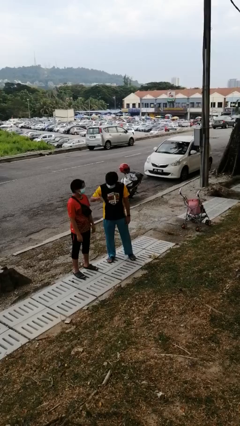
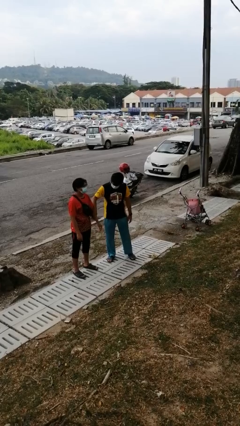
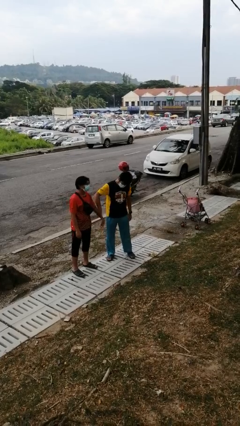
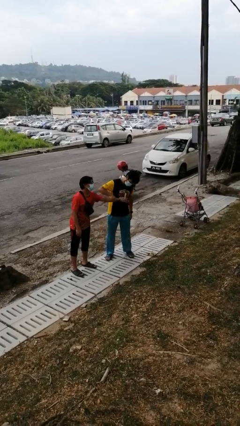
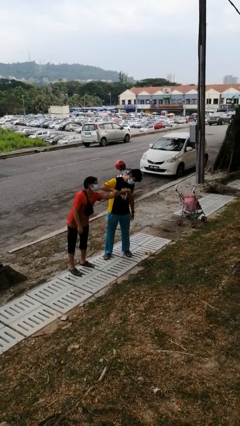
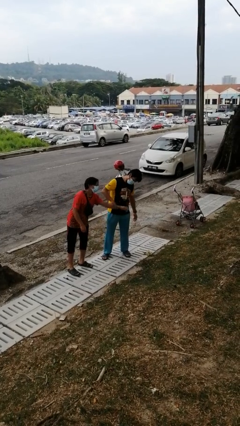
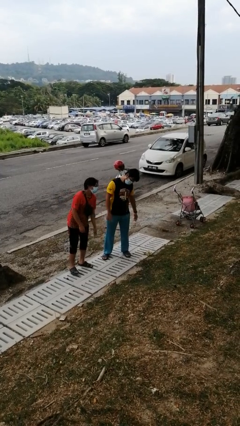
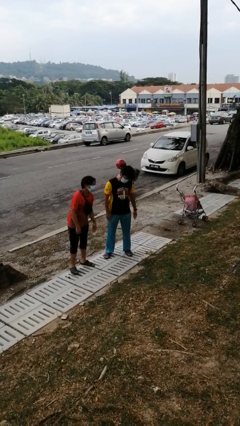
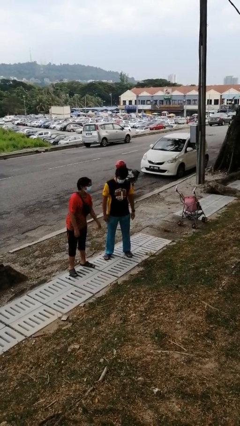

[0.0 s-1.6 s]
person grabs person by forearm

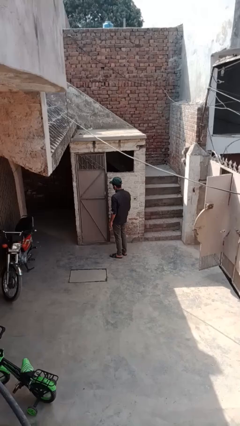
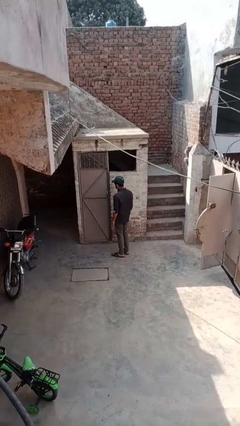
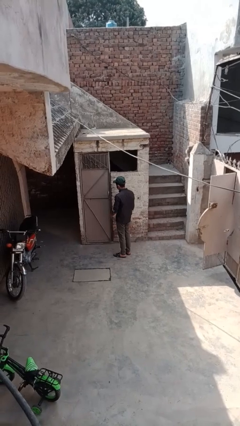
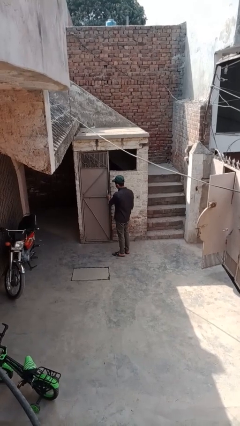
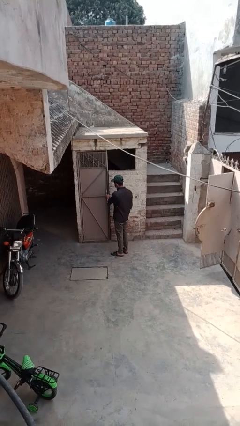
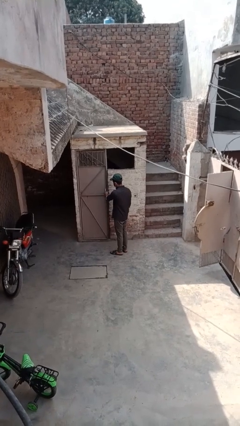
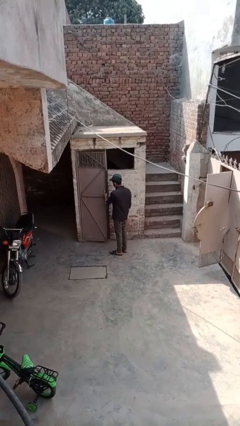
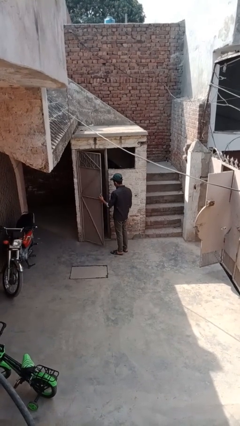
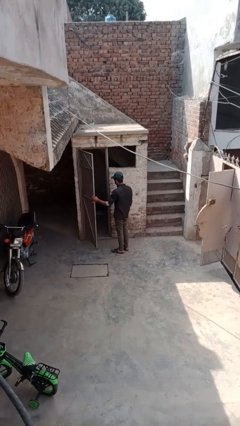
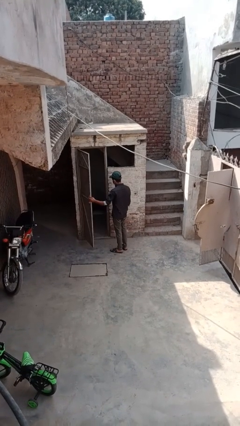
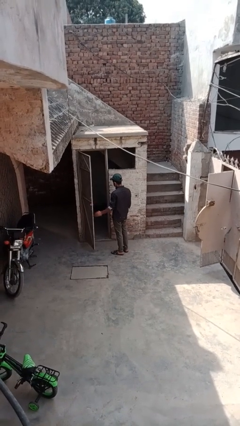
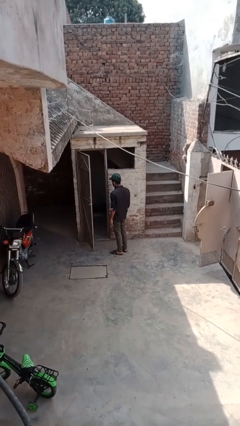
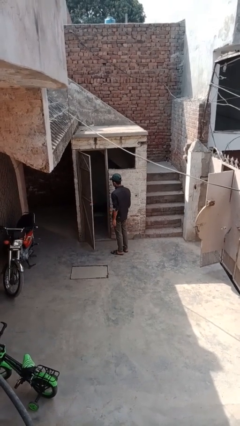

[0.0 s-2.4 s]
person opens facility door

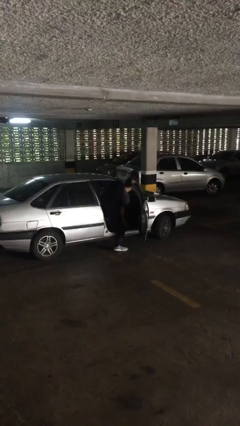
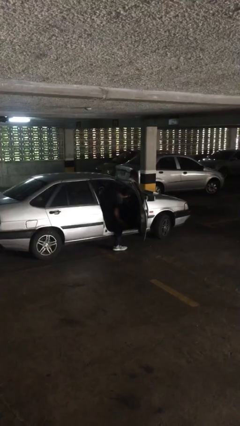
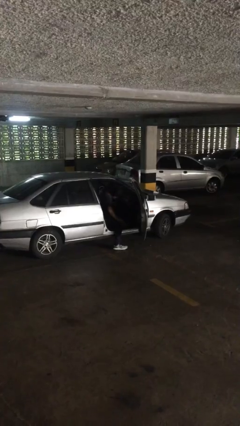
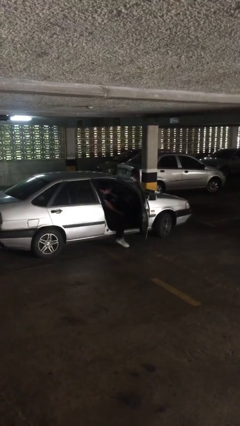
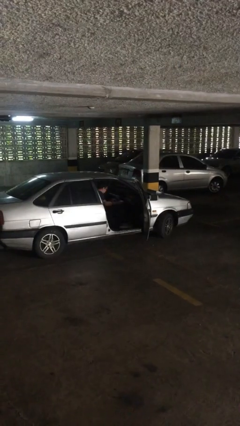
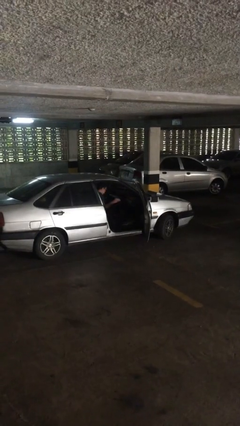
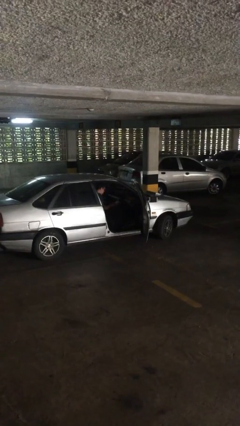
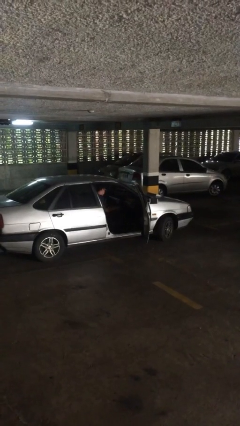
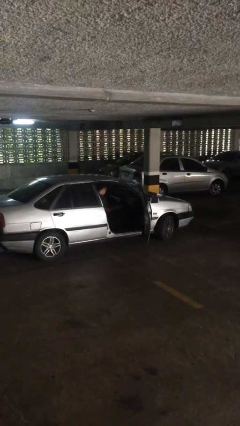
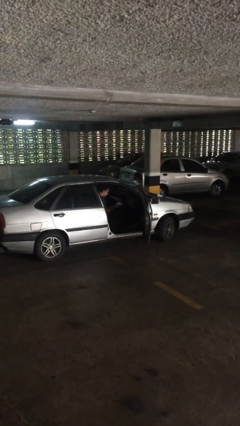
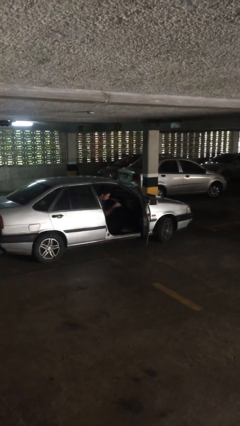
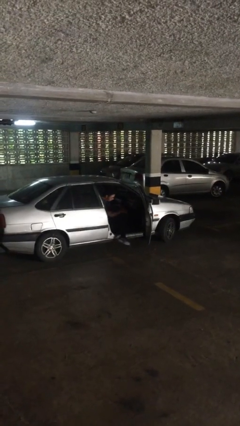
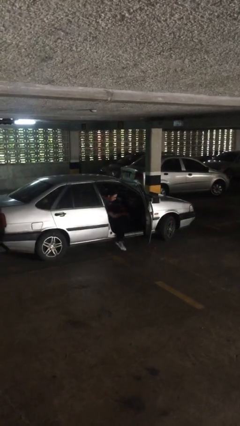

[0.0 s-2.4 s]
person enters car

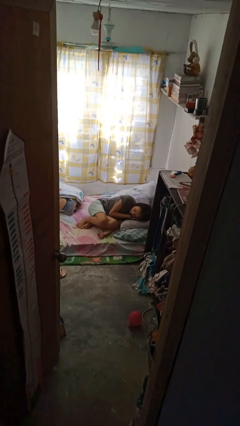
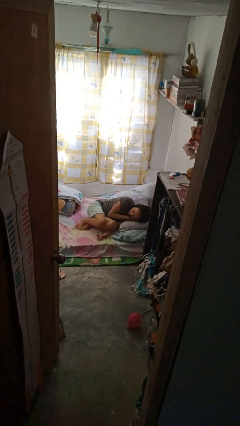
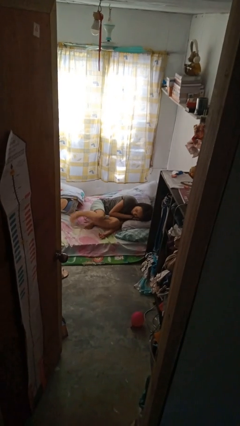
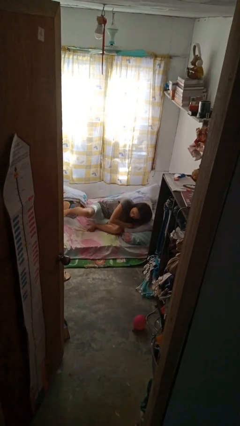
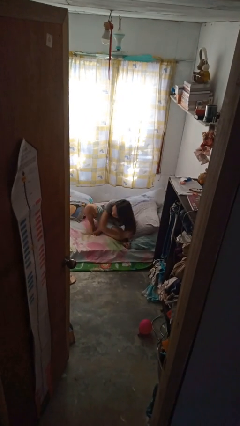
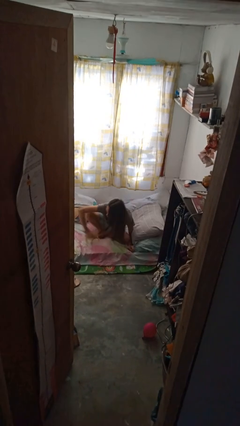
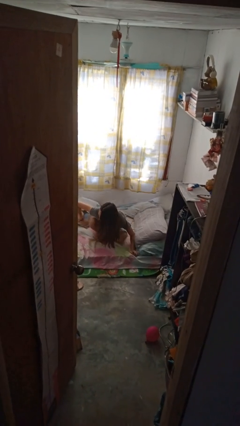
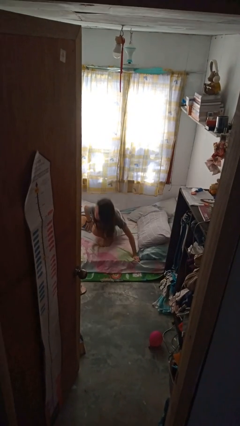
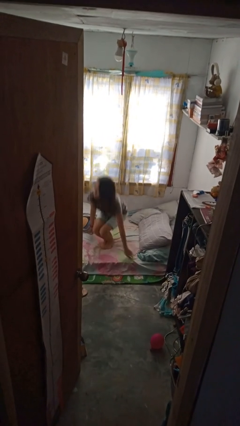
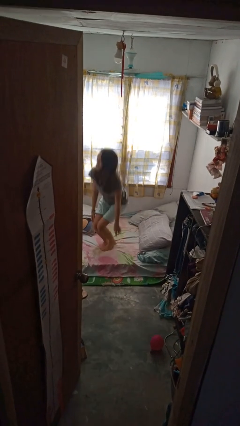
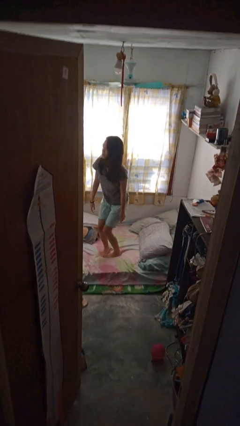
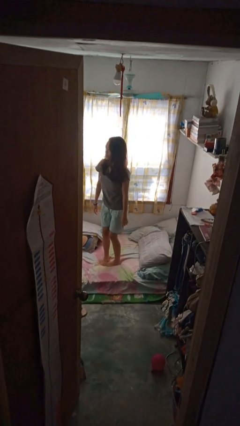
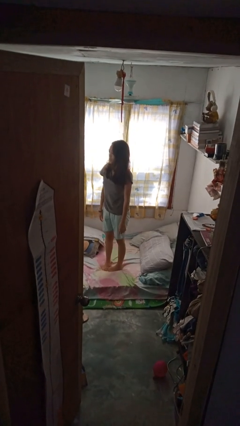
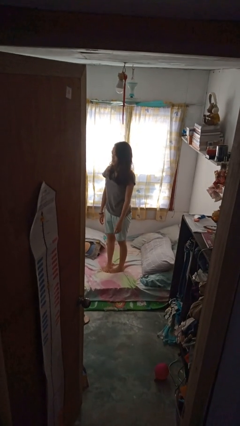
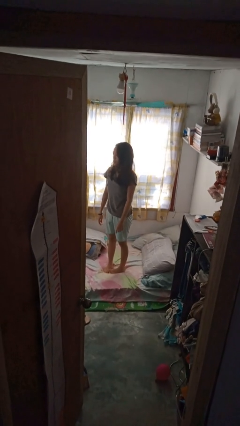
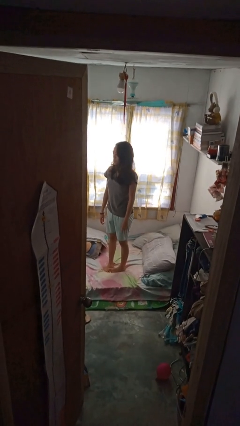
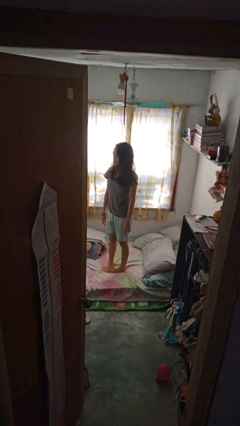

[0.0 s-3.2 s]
person stands up

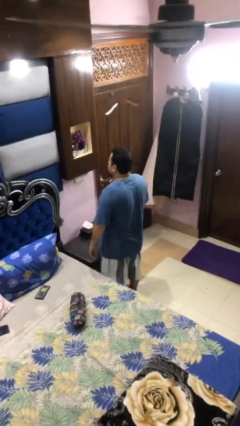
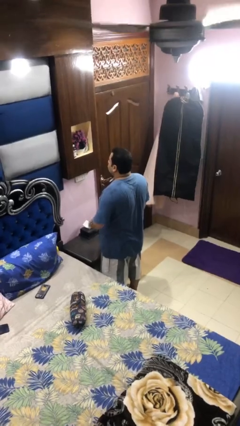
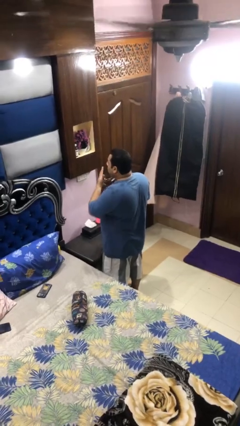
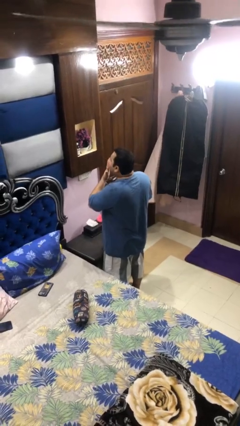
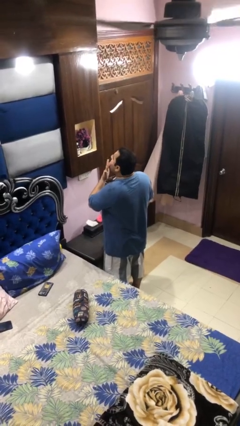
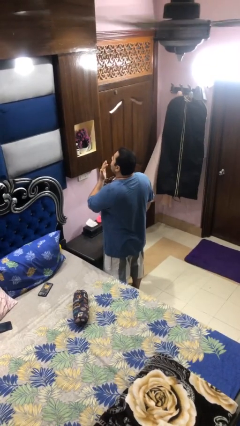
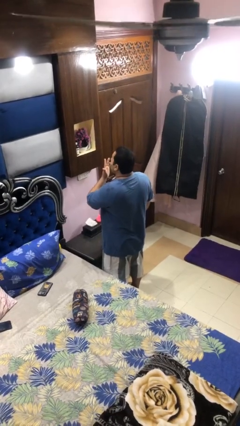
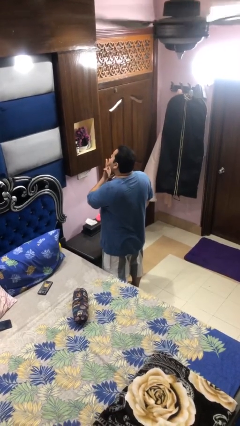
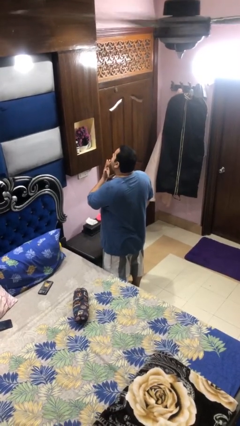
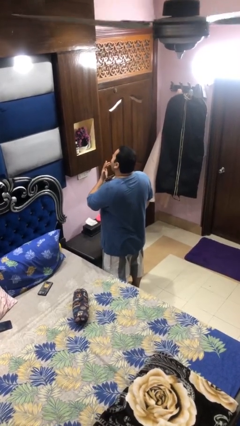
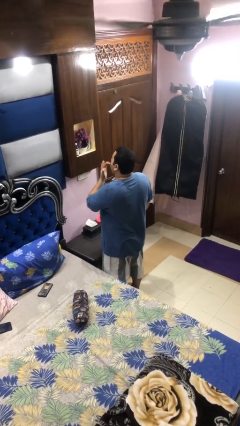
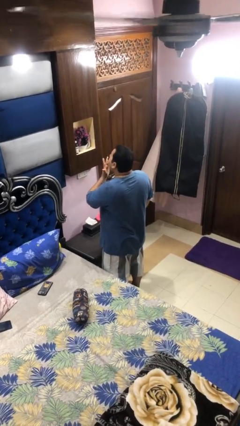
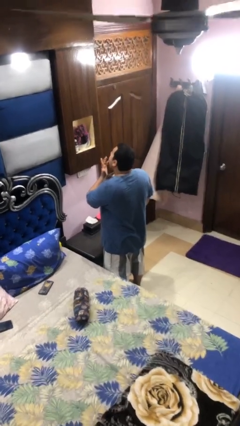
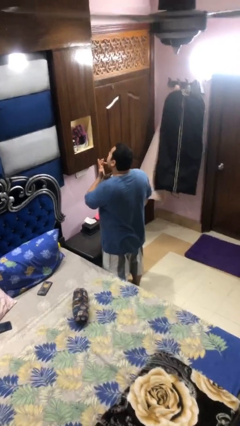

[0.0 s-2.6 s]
person licks fingers

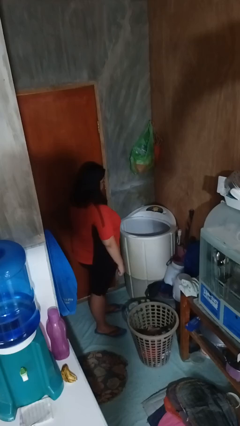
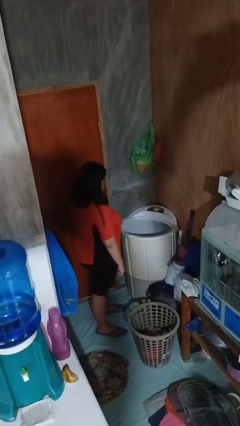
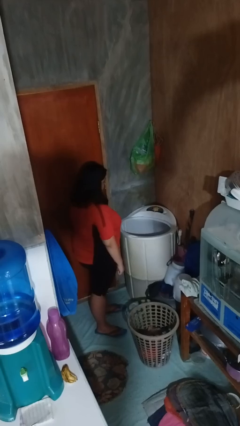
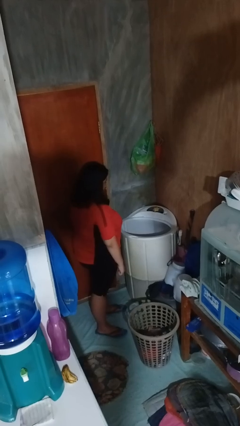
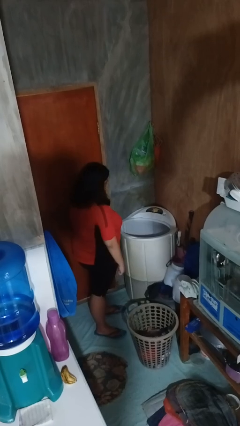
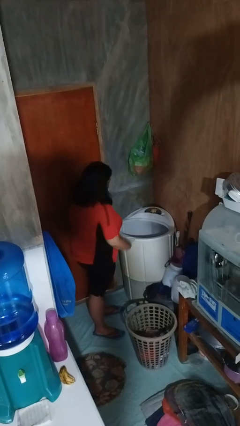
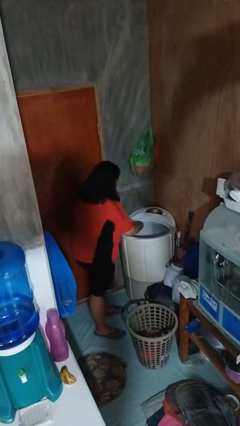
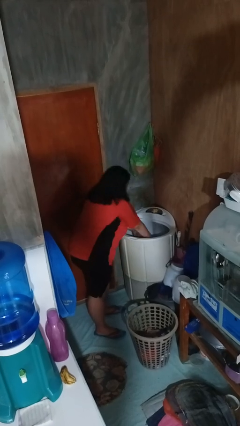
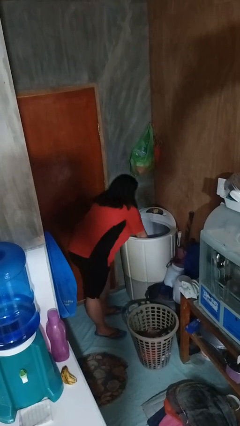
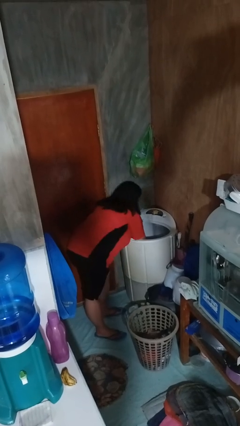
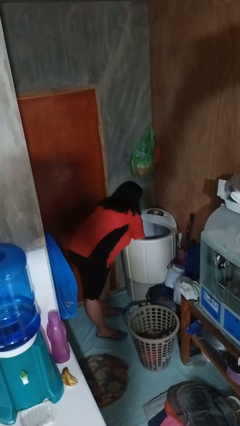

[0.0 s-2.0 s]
person loads clotheswasher

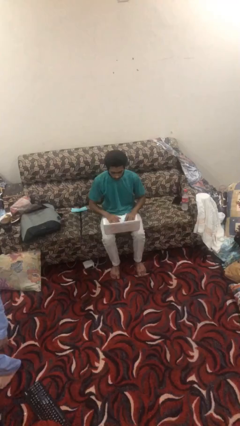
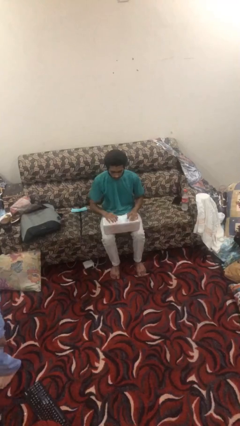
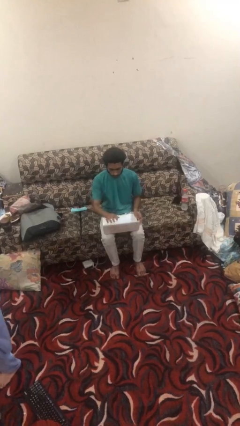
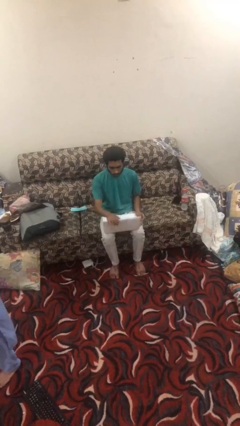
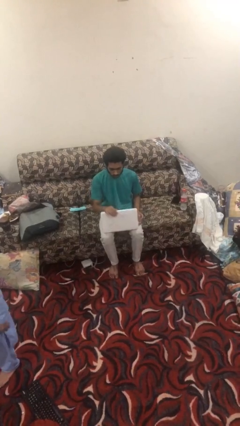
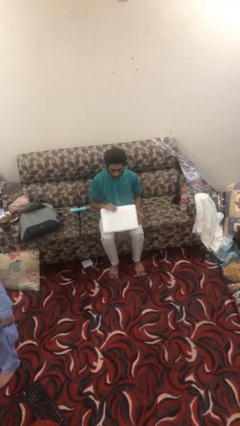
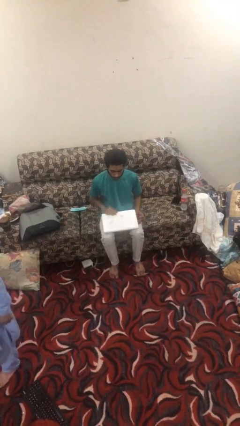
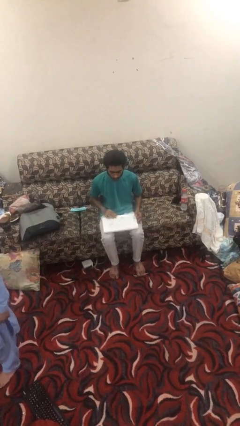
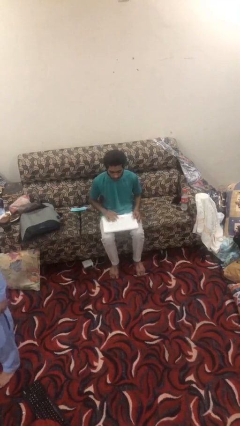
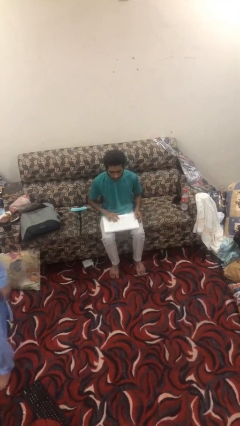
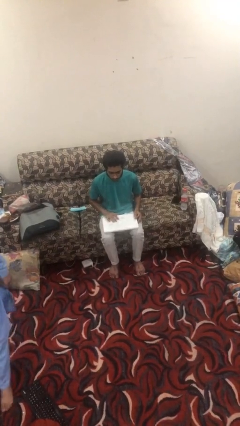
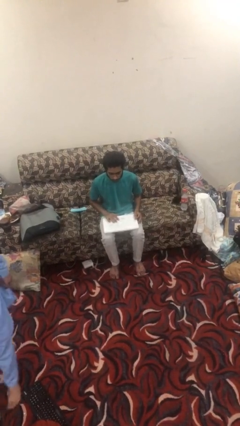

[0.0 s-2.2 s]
person closes laptop

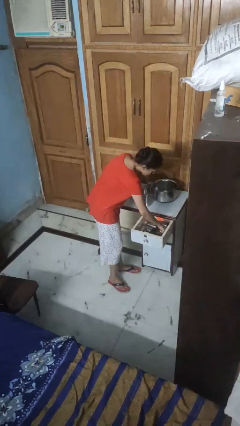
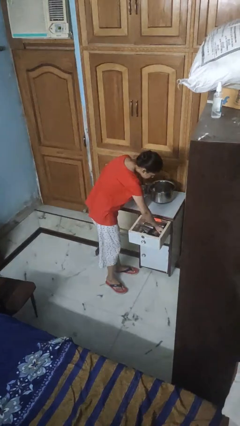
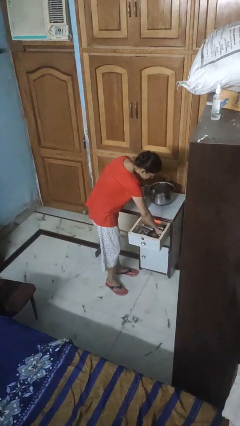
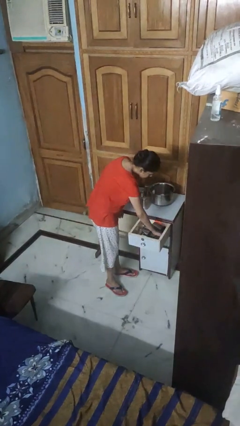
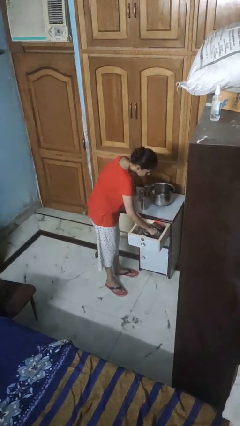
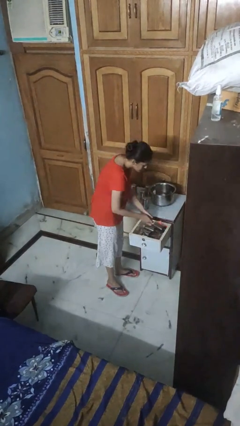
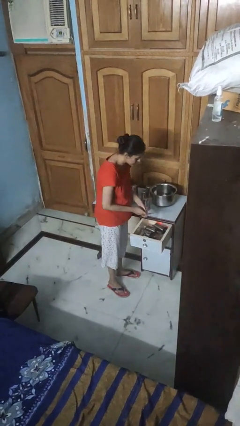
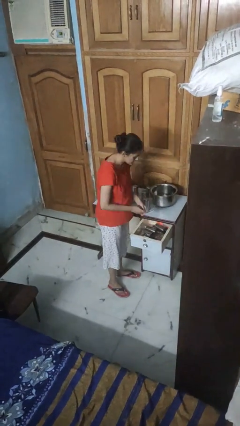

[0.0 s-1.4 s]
person takes object from kitchen drawer
